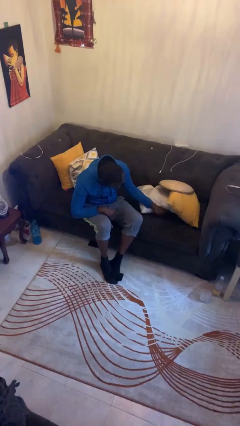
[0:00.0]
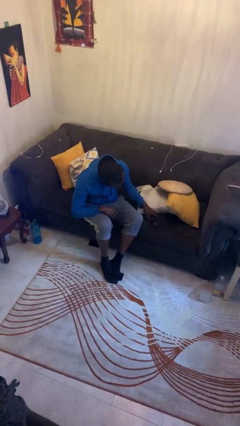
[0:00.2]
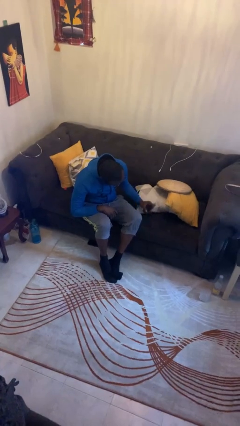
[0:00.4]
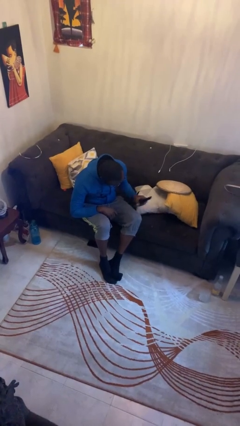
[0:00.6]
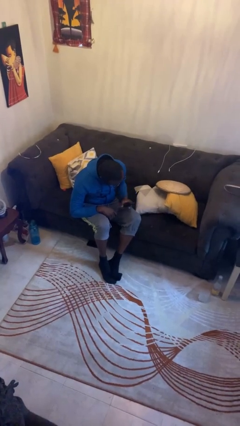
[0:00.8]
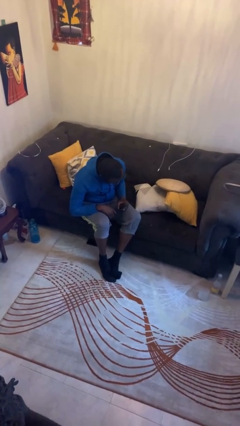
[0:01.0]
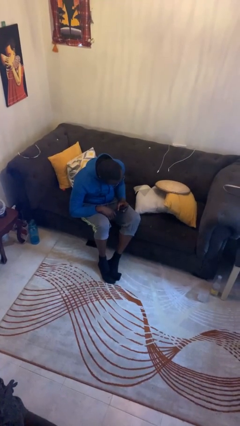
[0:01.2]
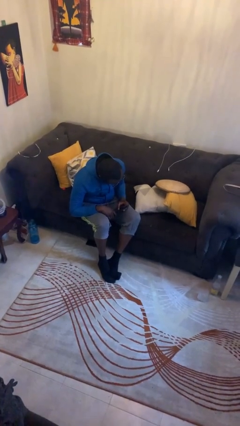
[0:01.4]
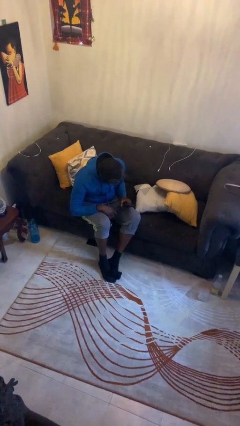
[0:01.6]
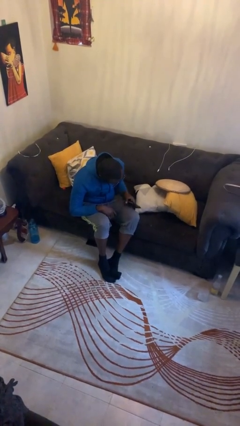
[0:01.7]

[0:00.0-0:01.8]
person searches in couch

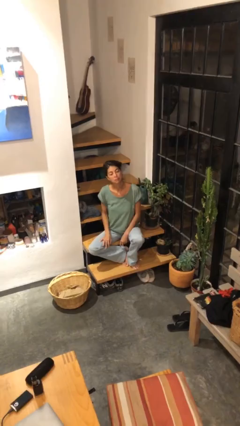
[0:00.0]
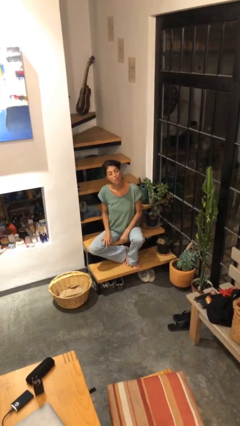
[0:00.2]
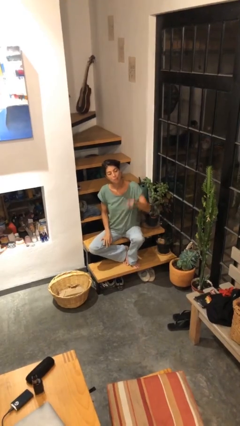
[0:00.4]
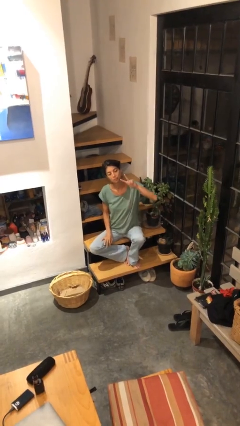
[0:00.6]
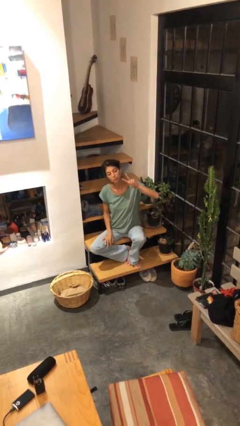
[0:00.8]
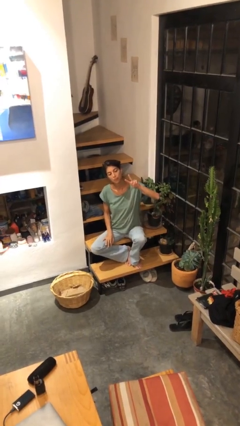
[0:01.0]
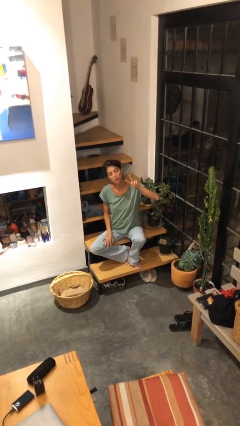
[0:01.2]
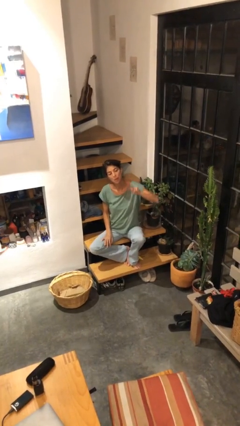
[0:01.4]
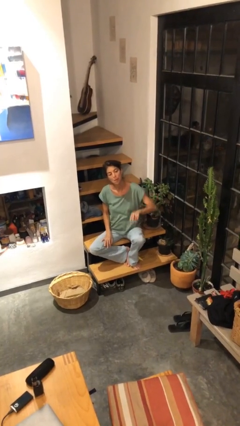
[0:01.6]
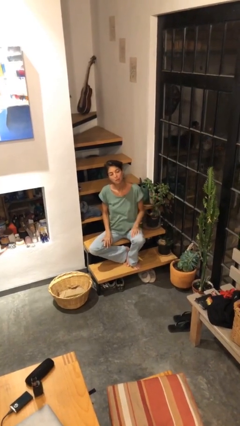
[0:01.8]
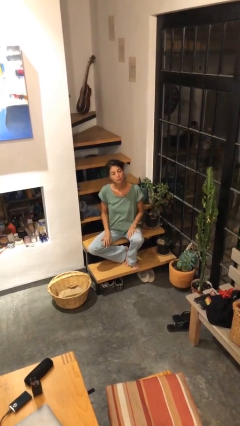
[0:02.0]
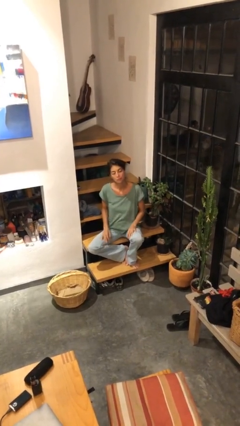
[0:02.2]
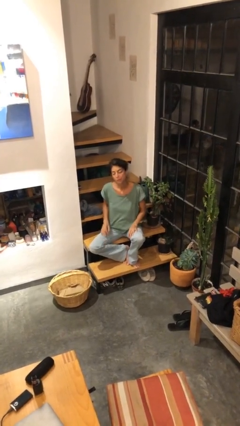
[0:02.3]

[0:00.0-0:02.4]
person gestures peace

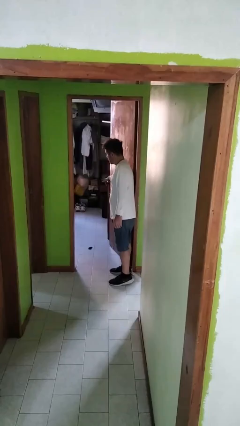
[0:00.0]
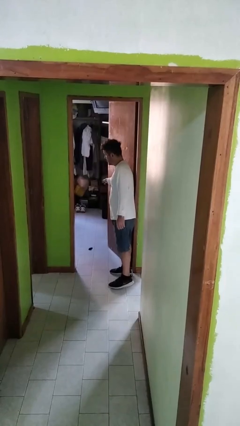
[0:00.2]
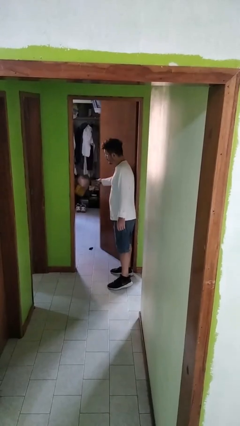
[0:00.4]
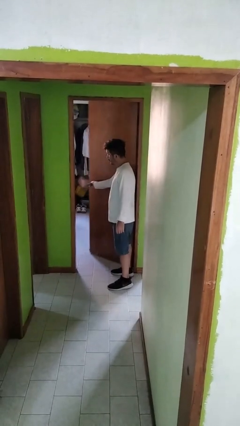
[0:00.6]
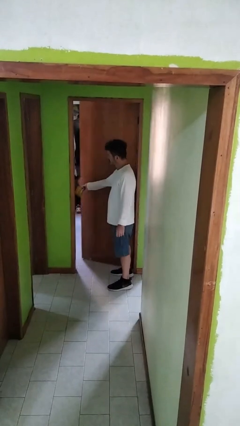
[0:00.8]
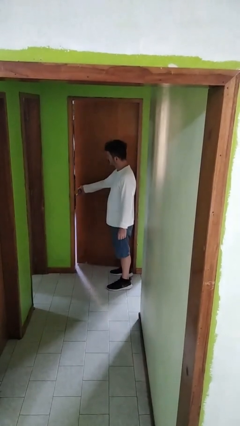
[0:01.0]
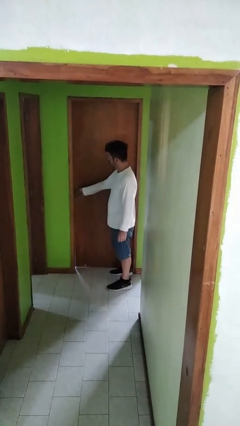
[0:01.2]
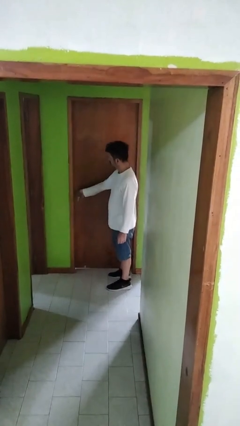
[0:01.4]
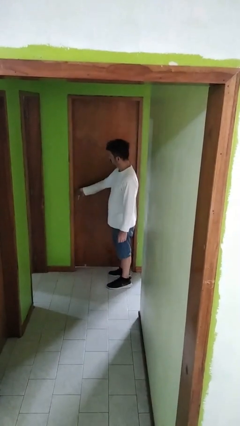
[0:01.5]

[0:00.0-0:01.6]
person closes facility door

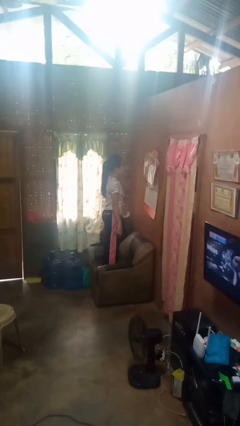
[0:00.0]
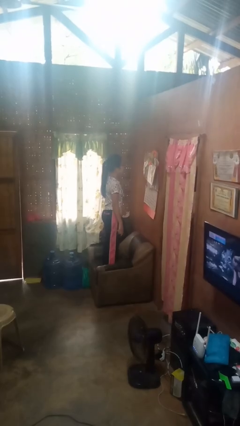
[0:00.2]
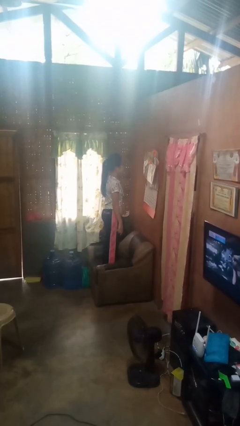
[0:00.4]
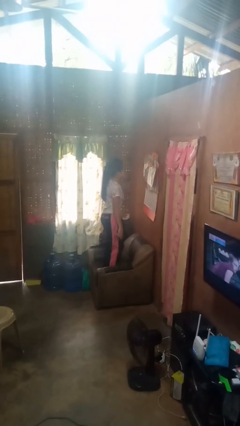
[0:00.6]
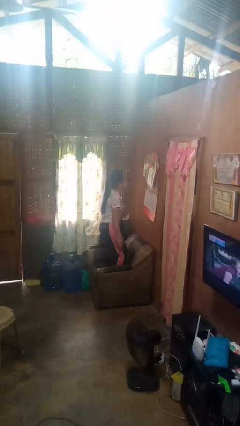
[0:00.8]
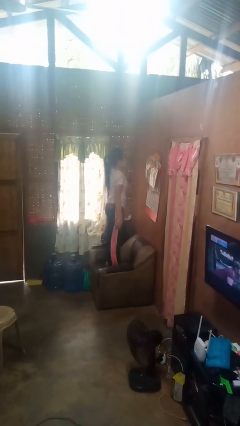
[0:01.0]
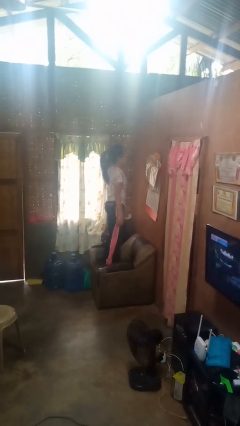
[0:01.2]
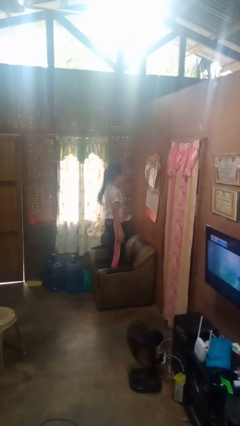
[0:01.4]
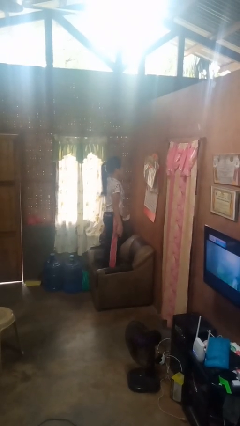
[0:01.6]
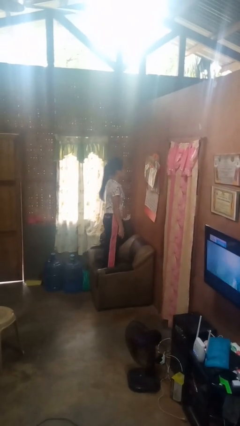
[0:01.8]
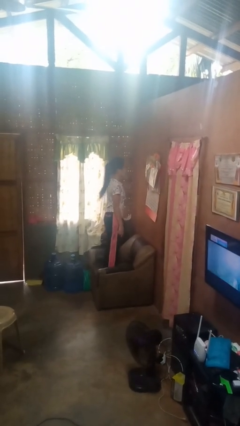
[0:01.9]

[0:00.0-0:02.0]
person jumps on couch

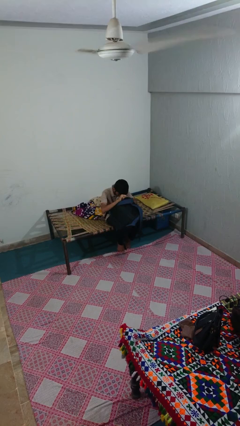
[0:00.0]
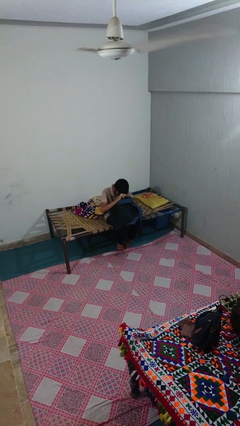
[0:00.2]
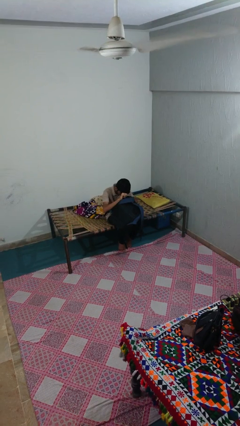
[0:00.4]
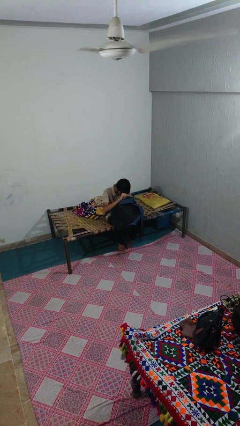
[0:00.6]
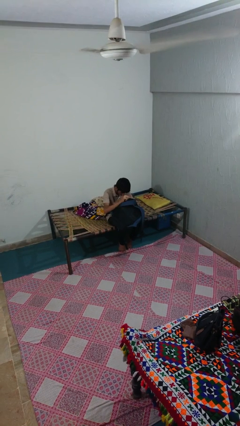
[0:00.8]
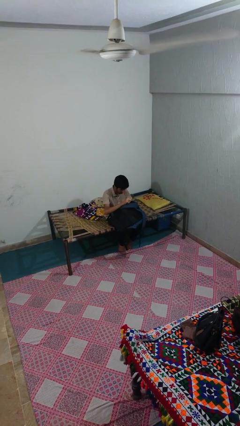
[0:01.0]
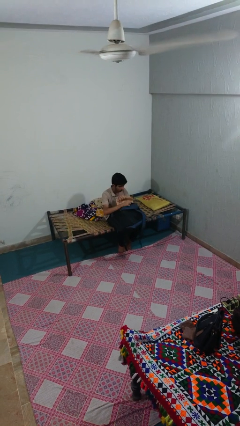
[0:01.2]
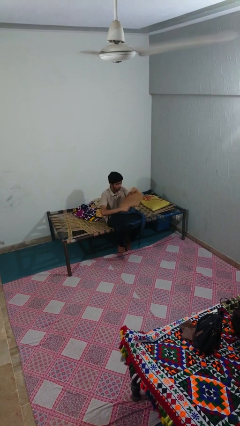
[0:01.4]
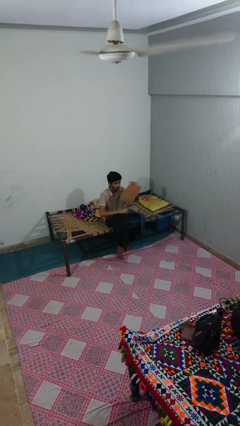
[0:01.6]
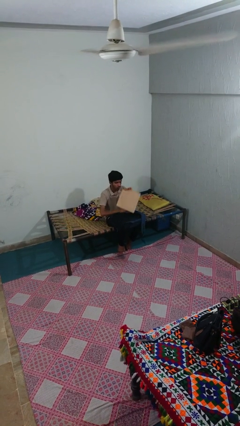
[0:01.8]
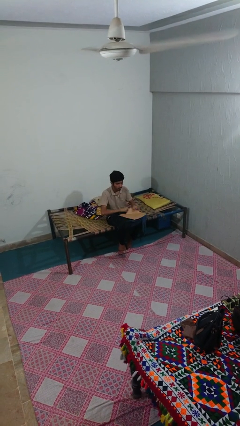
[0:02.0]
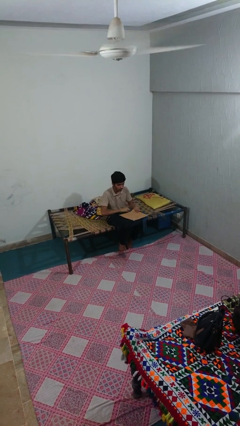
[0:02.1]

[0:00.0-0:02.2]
person takes object from backpack

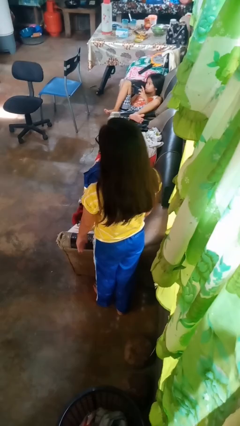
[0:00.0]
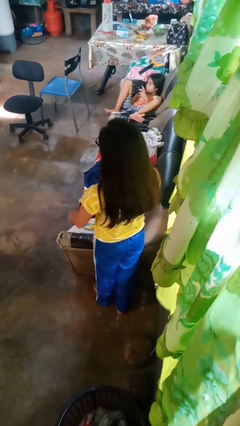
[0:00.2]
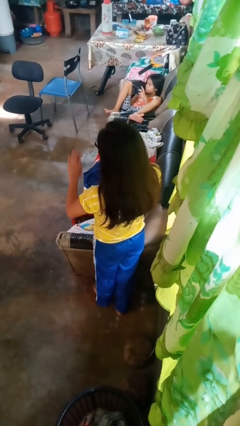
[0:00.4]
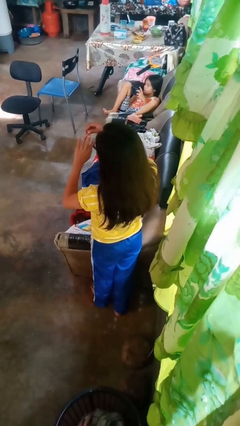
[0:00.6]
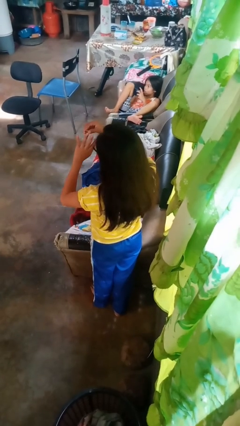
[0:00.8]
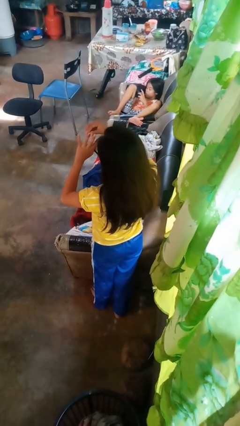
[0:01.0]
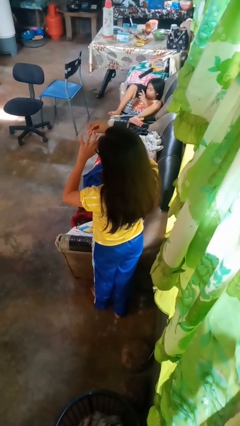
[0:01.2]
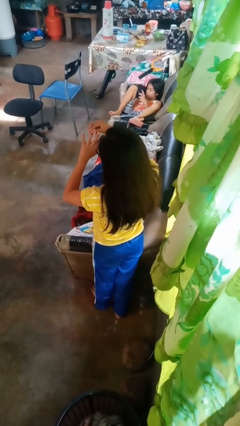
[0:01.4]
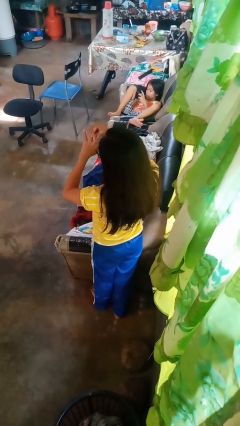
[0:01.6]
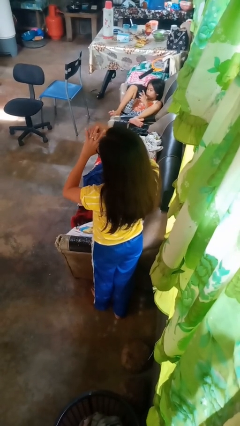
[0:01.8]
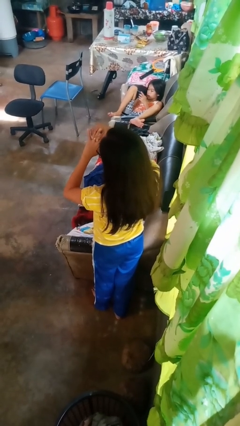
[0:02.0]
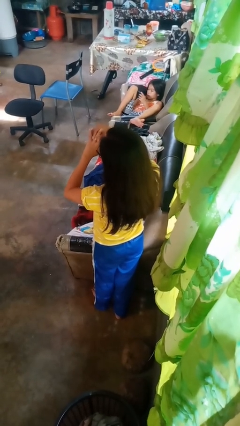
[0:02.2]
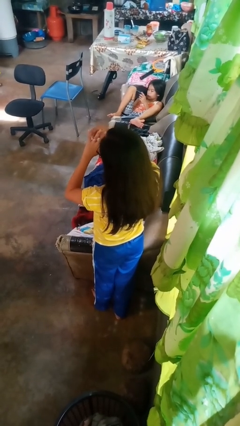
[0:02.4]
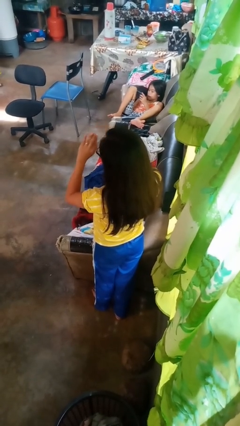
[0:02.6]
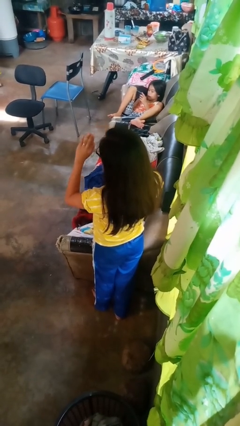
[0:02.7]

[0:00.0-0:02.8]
person puts on ring

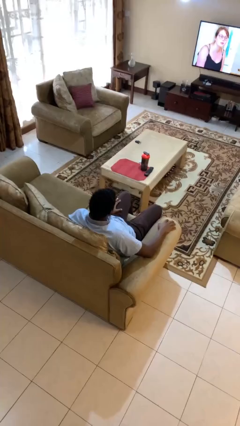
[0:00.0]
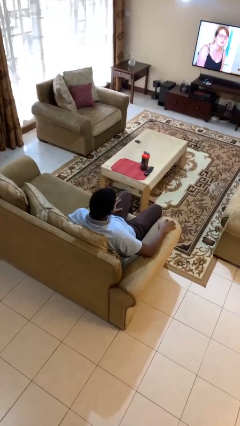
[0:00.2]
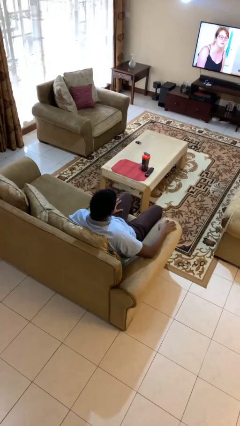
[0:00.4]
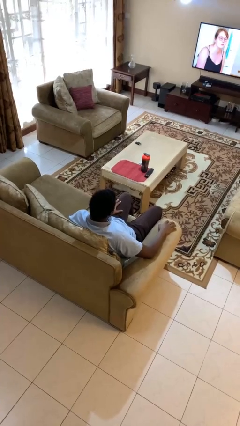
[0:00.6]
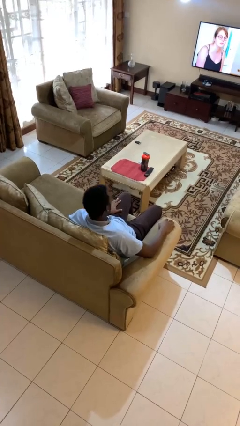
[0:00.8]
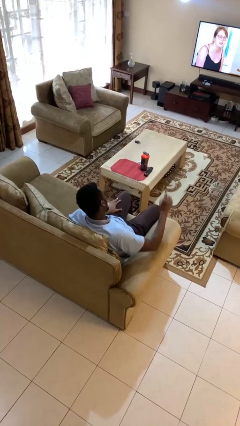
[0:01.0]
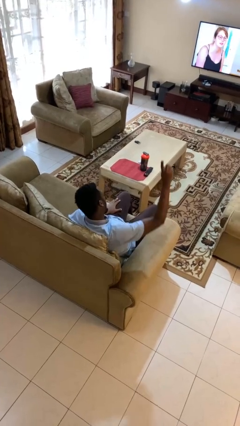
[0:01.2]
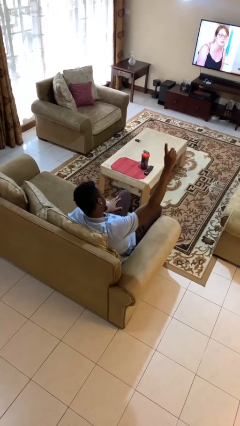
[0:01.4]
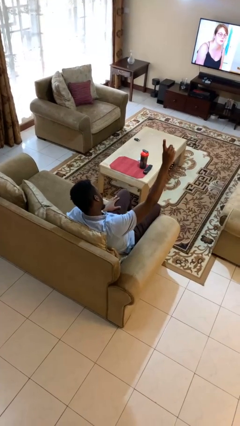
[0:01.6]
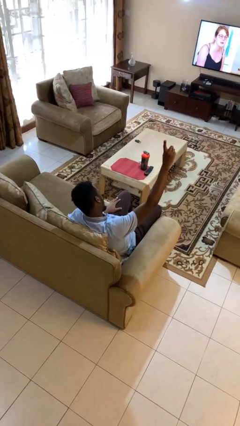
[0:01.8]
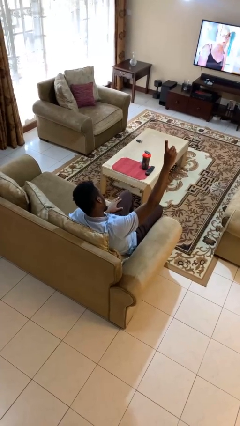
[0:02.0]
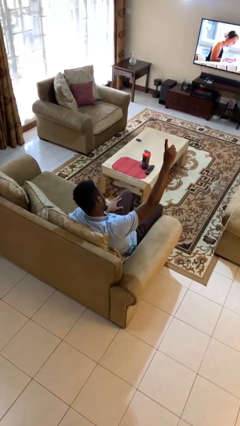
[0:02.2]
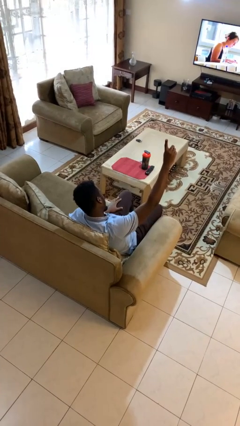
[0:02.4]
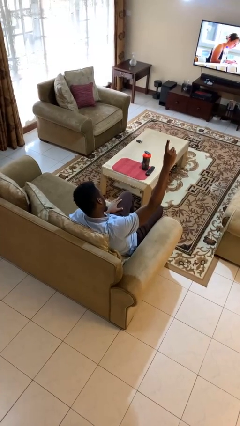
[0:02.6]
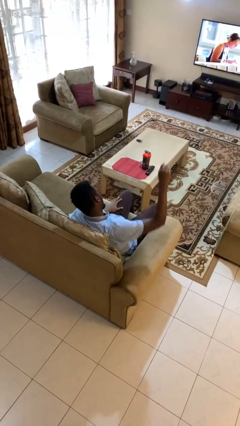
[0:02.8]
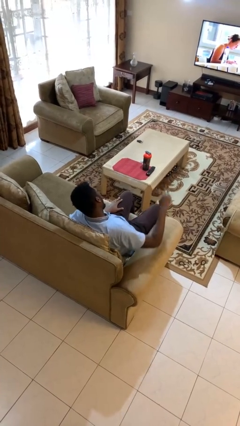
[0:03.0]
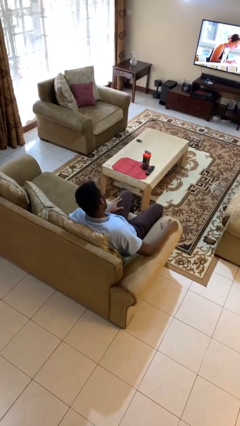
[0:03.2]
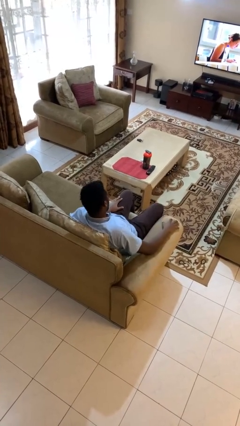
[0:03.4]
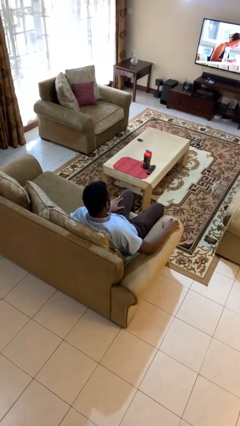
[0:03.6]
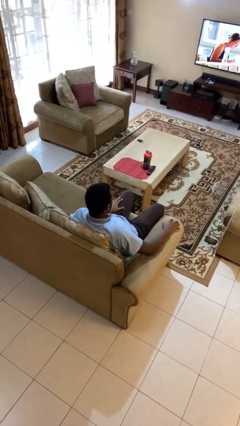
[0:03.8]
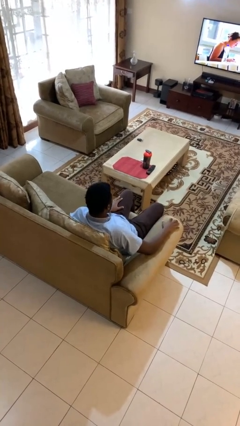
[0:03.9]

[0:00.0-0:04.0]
person gestures number one
